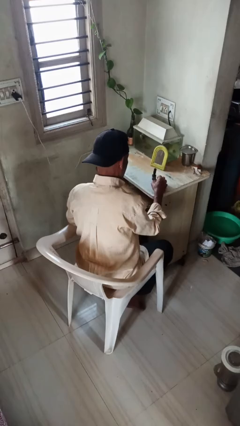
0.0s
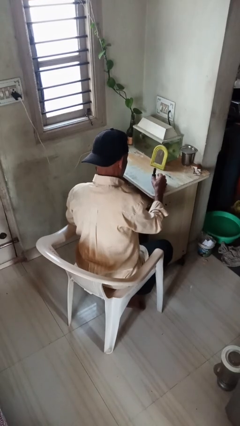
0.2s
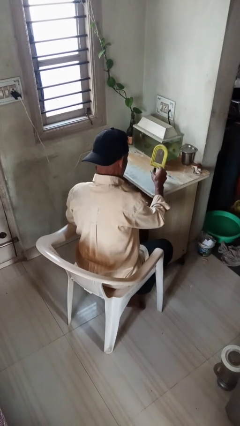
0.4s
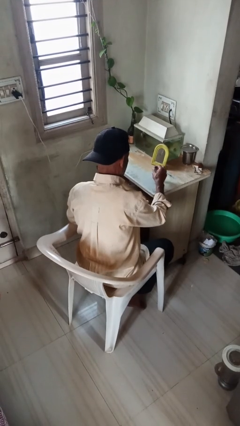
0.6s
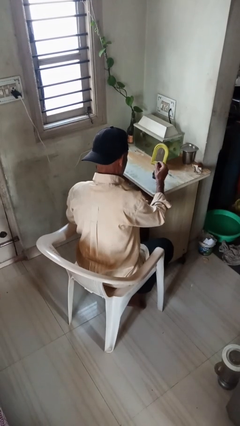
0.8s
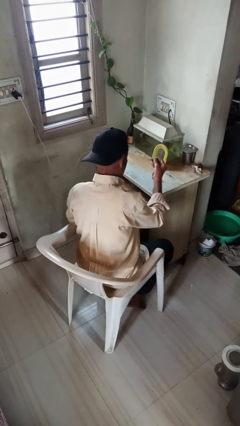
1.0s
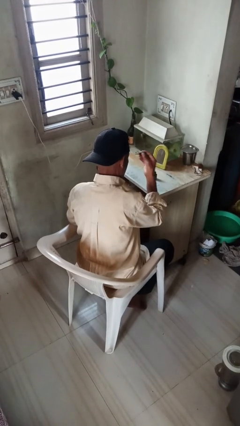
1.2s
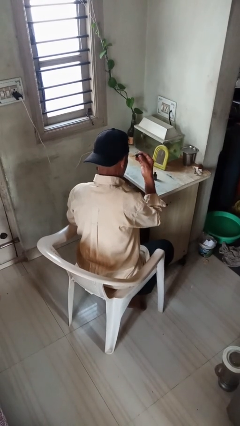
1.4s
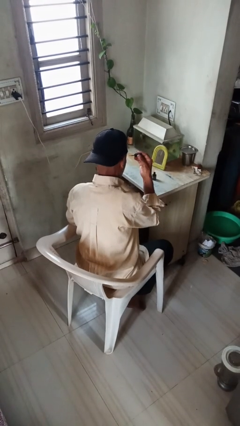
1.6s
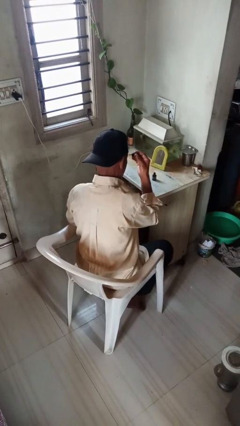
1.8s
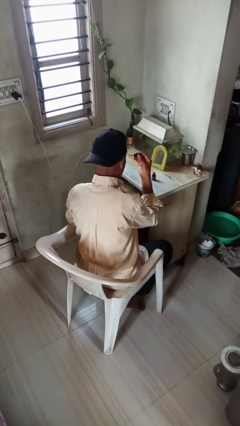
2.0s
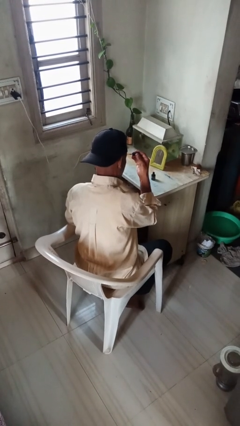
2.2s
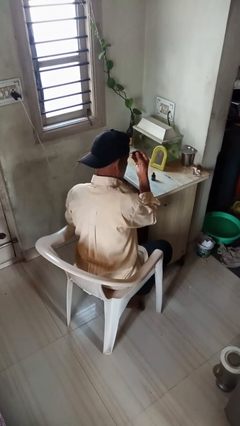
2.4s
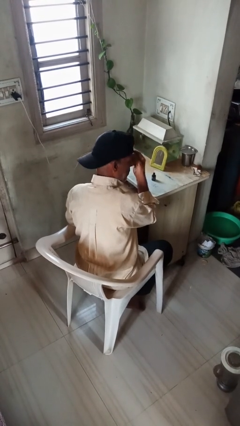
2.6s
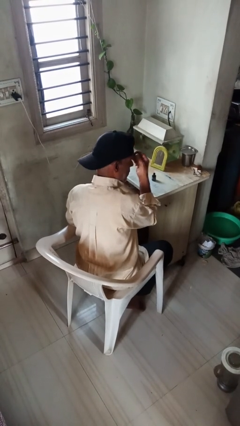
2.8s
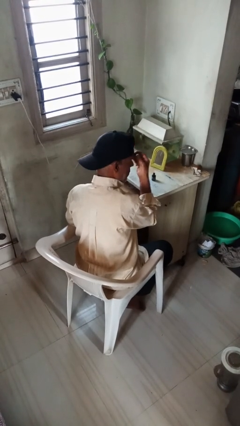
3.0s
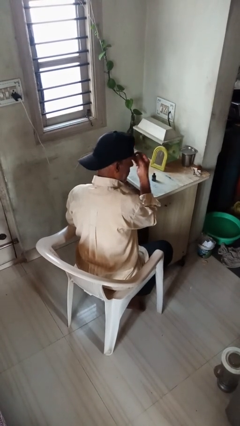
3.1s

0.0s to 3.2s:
person applies eye makeup

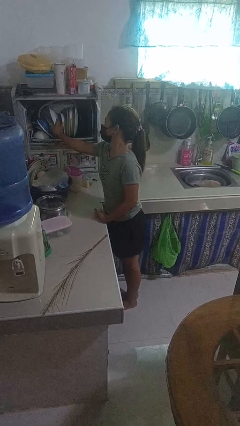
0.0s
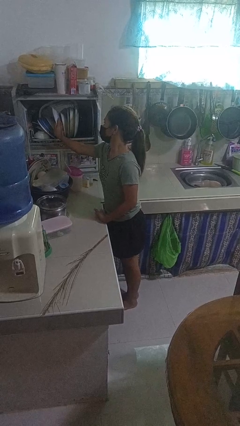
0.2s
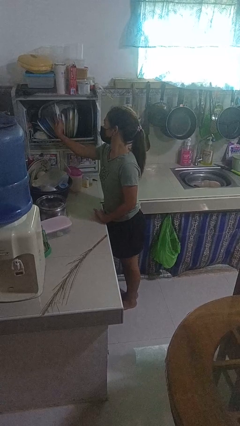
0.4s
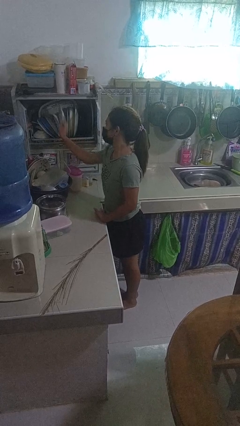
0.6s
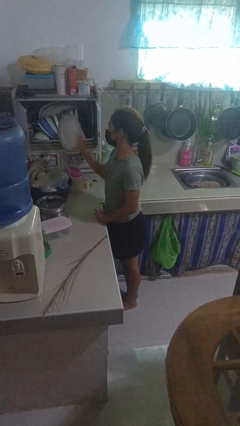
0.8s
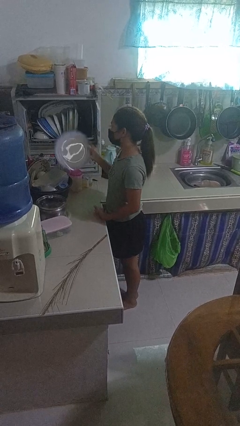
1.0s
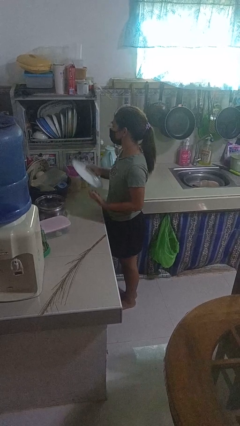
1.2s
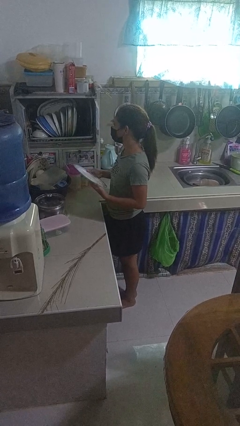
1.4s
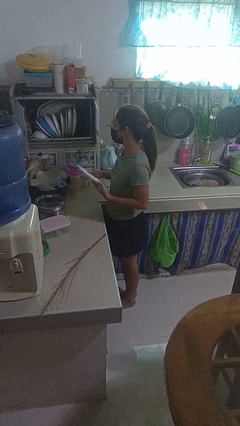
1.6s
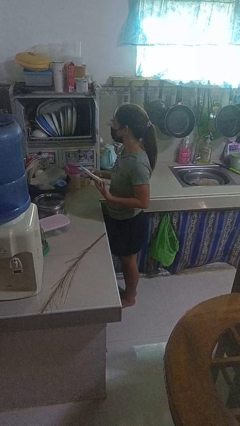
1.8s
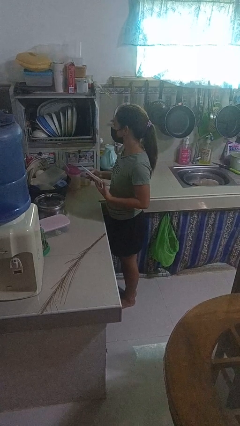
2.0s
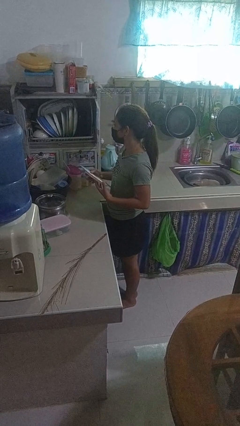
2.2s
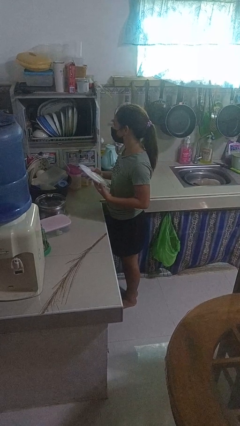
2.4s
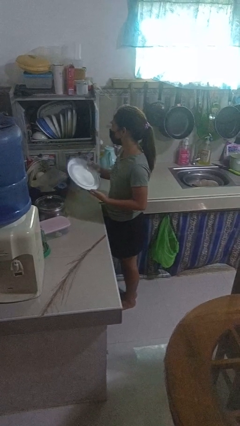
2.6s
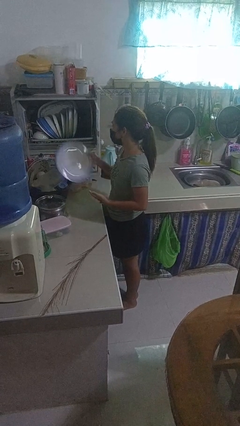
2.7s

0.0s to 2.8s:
person takes object from kitchen drawer

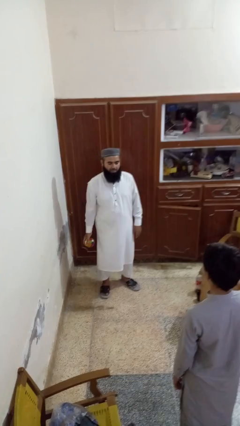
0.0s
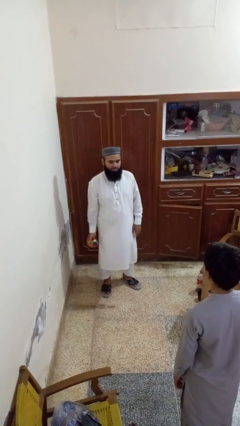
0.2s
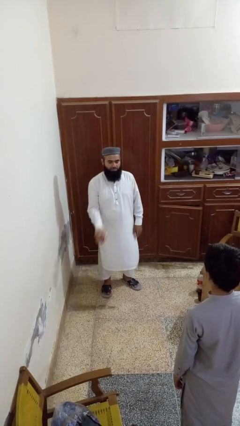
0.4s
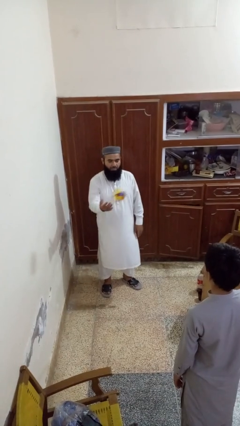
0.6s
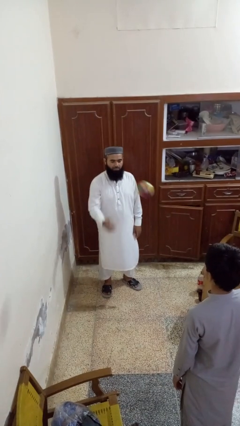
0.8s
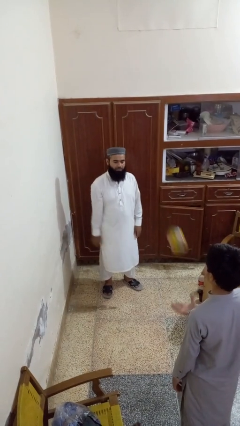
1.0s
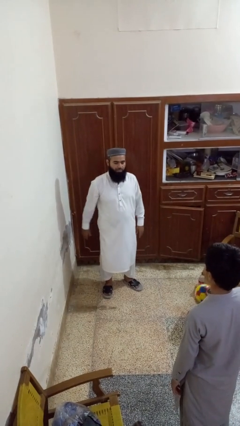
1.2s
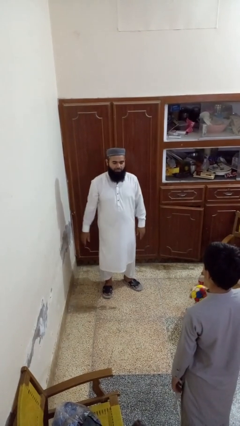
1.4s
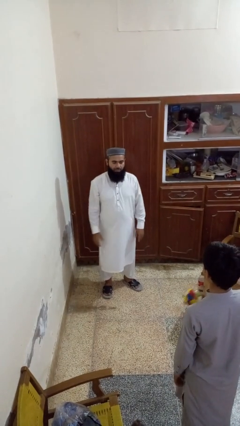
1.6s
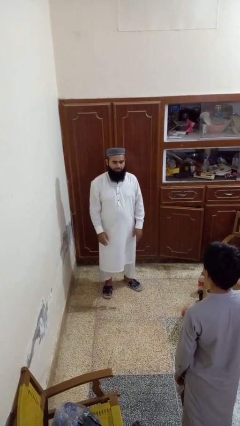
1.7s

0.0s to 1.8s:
person throws object to person

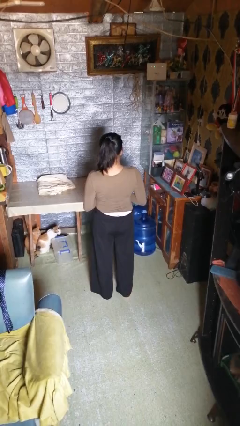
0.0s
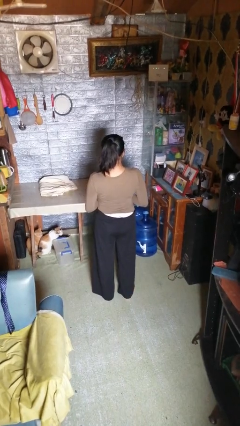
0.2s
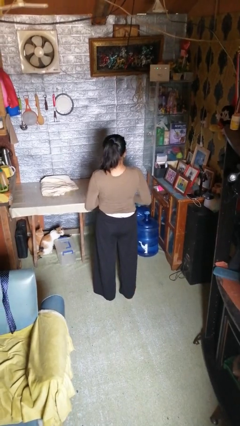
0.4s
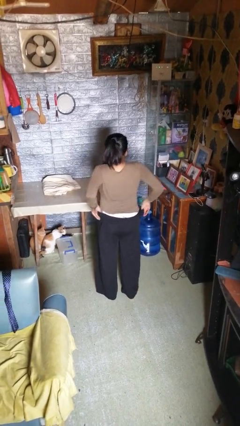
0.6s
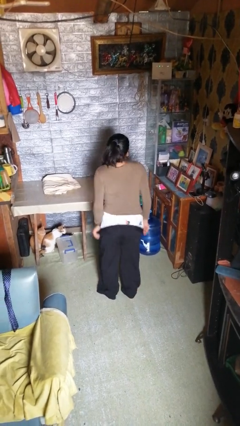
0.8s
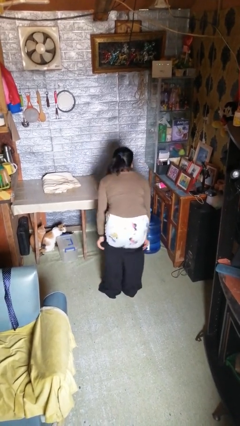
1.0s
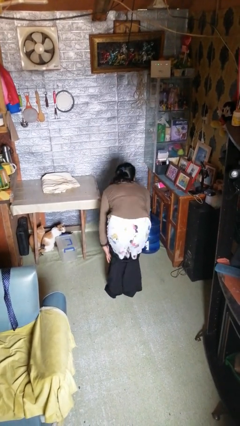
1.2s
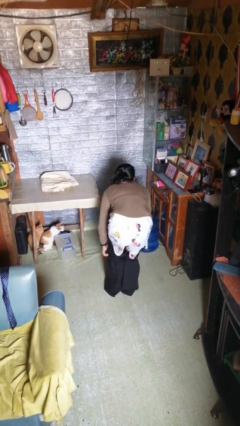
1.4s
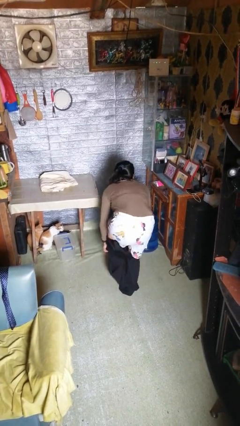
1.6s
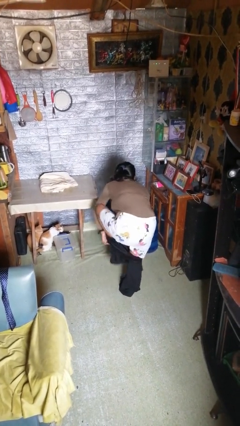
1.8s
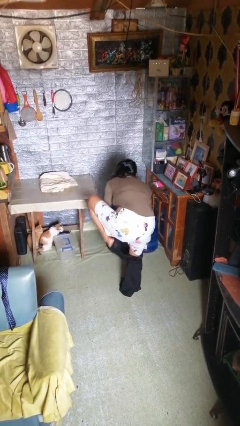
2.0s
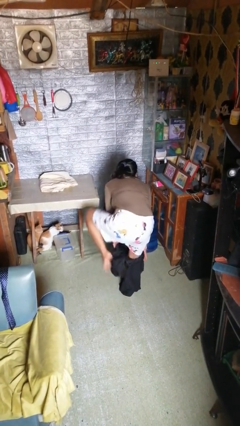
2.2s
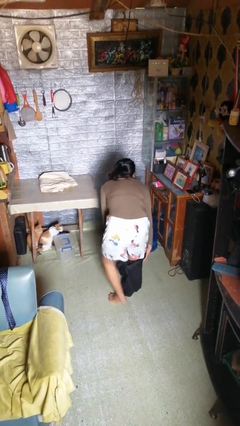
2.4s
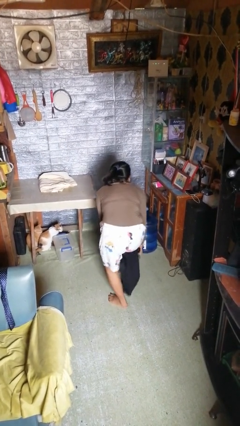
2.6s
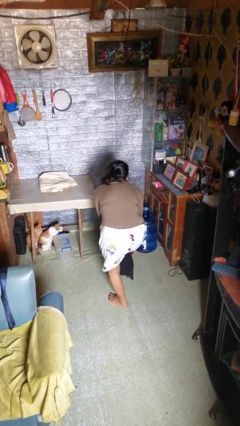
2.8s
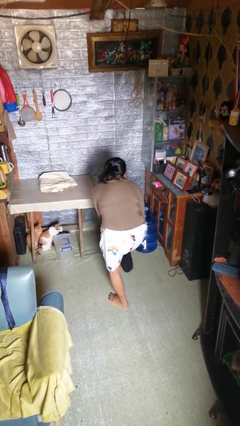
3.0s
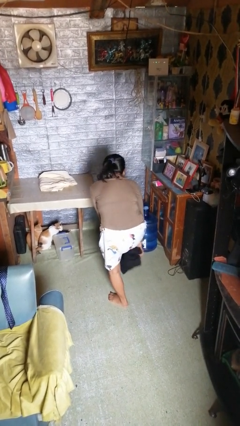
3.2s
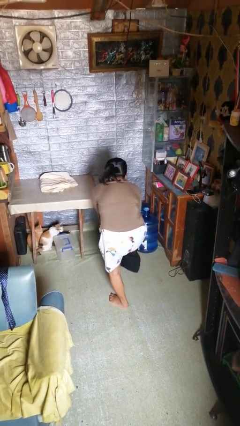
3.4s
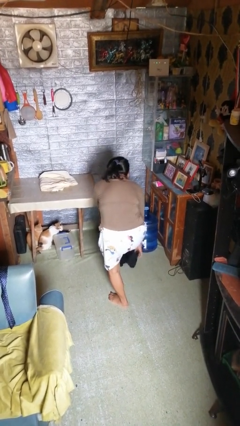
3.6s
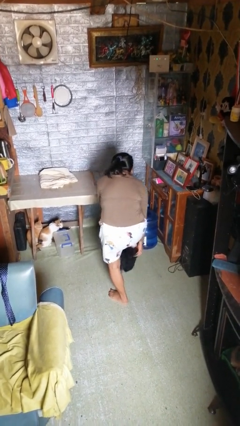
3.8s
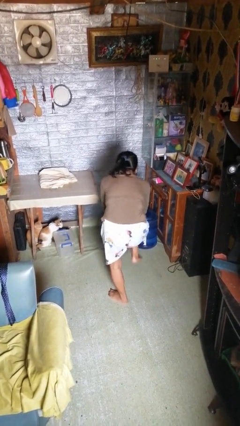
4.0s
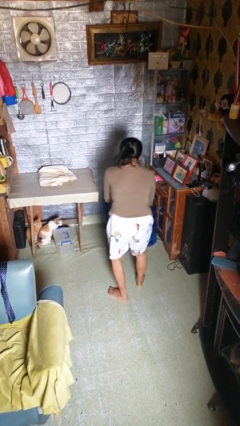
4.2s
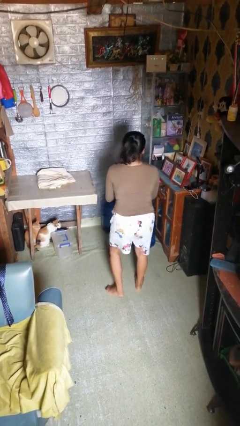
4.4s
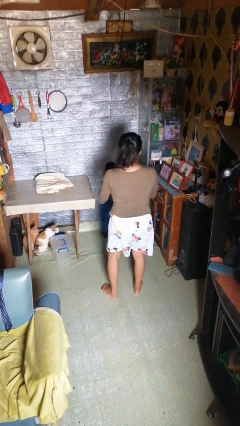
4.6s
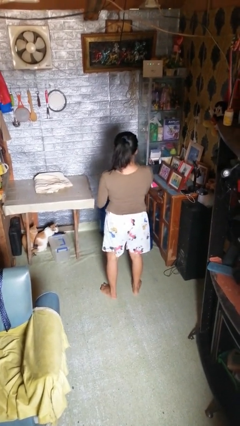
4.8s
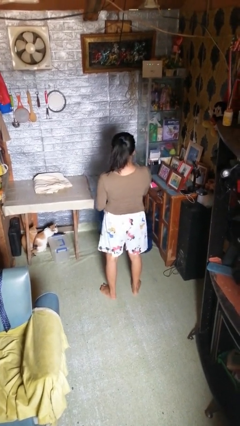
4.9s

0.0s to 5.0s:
person takes off pants

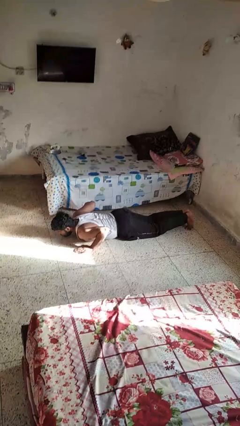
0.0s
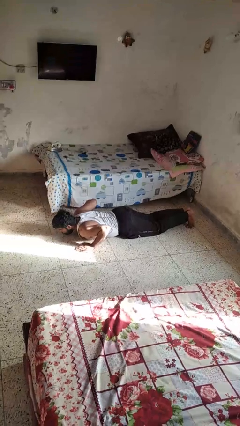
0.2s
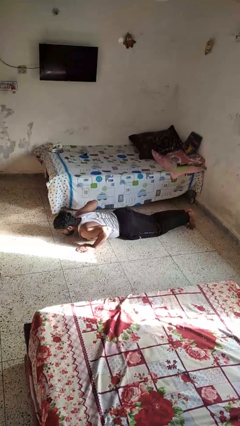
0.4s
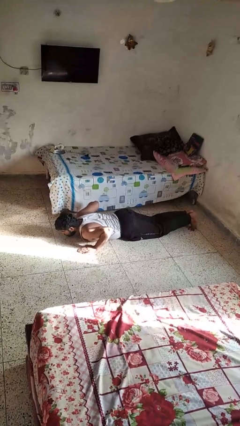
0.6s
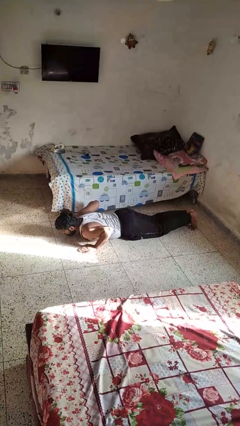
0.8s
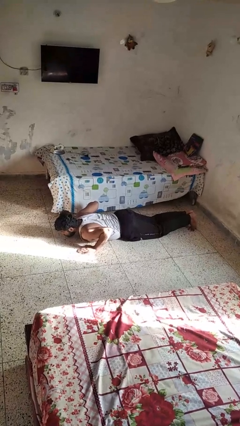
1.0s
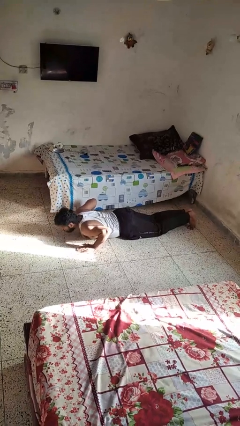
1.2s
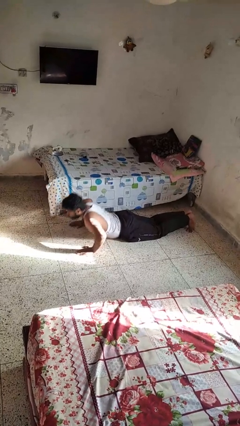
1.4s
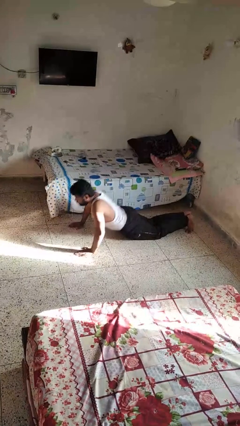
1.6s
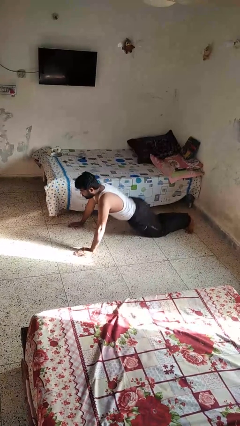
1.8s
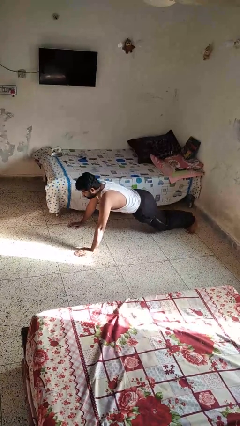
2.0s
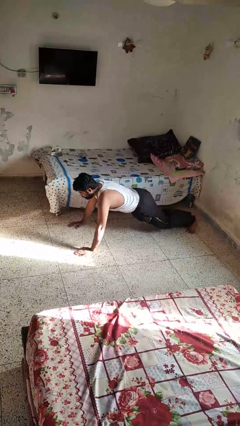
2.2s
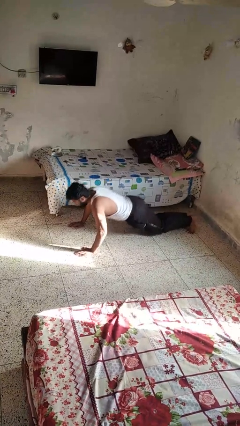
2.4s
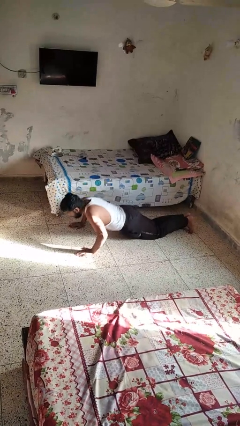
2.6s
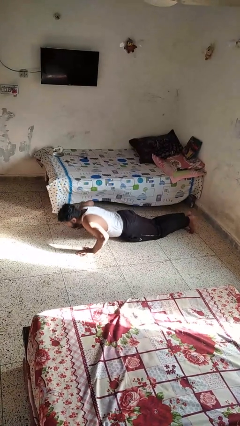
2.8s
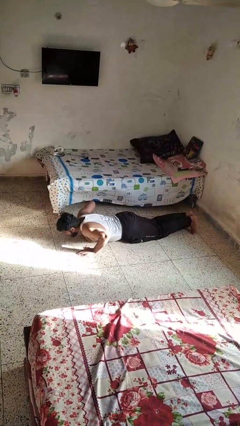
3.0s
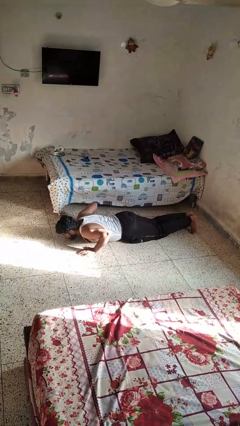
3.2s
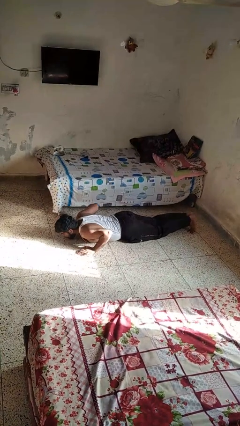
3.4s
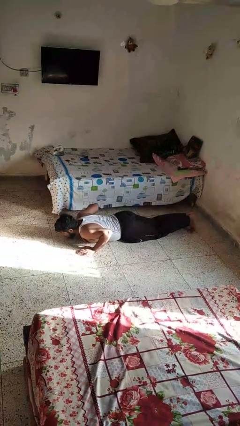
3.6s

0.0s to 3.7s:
person exercises with pushup

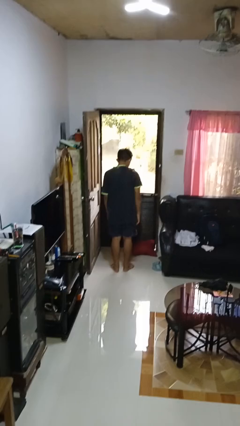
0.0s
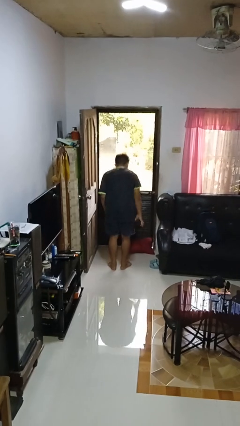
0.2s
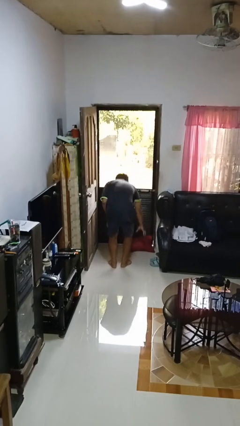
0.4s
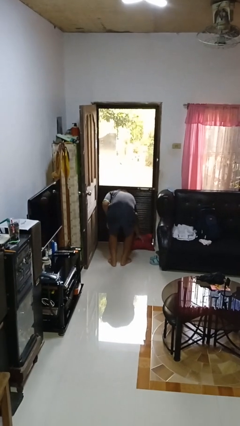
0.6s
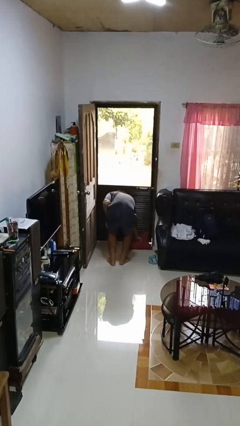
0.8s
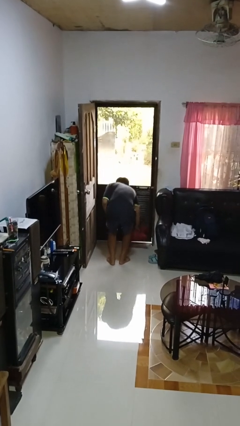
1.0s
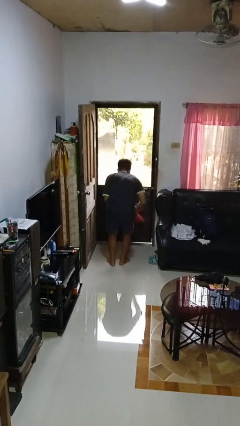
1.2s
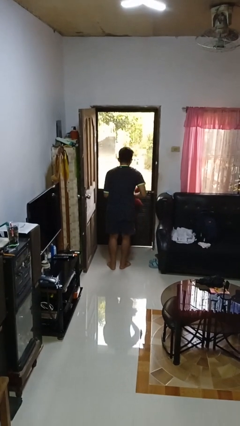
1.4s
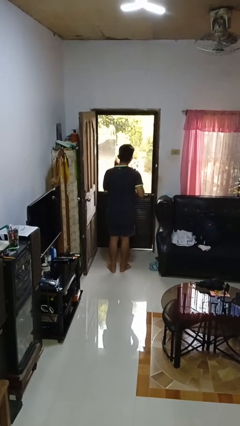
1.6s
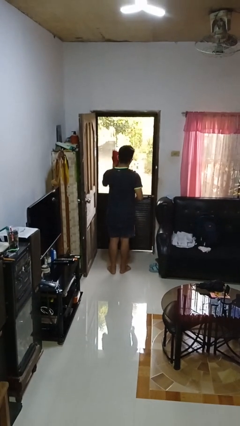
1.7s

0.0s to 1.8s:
person picks up object from floor
